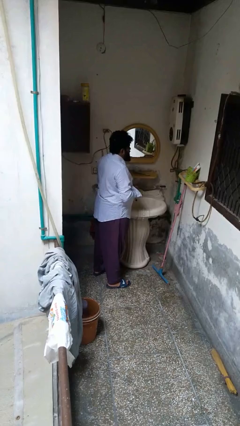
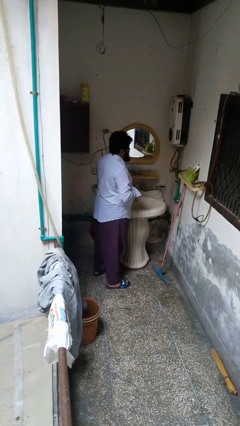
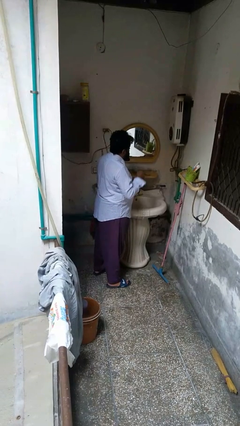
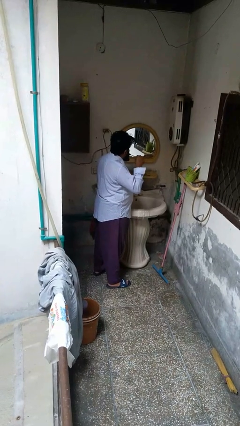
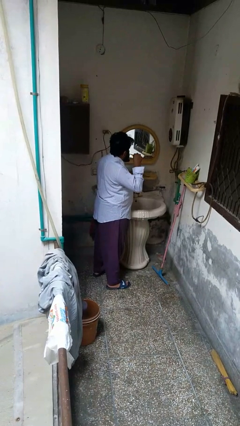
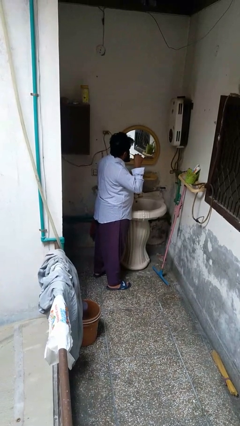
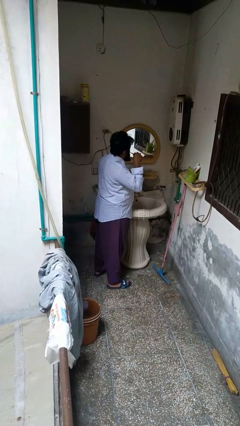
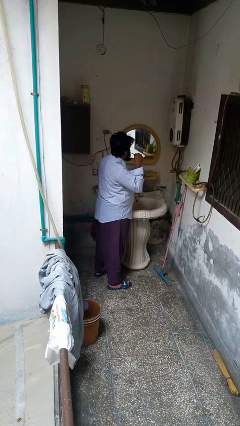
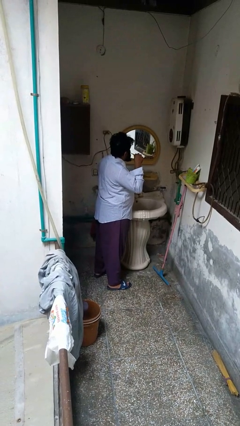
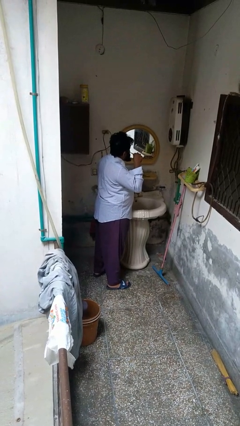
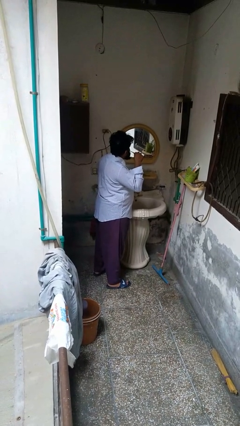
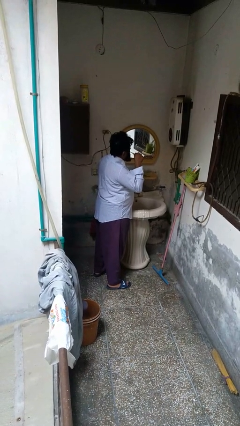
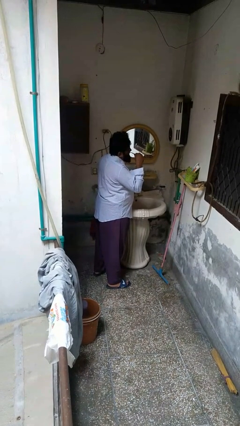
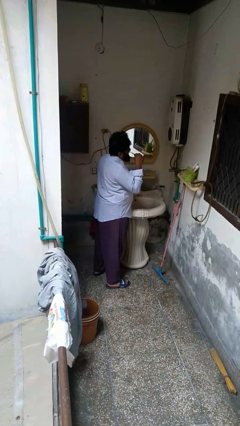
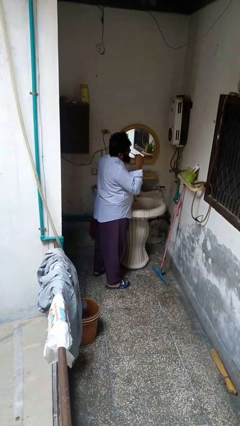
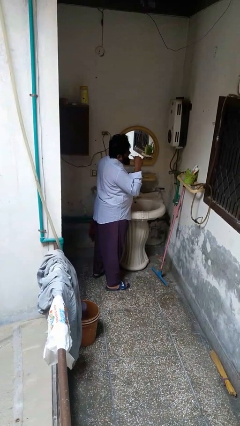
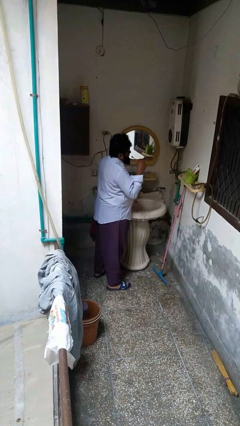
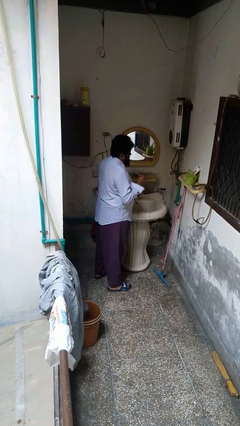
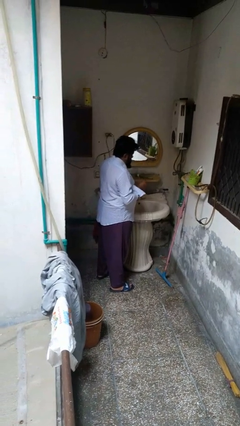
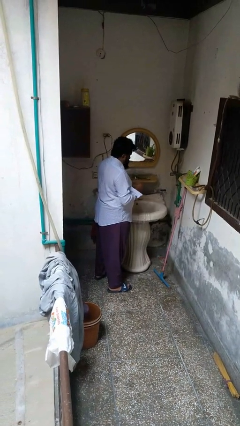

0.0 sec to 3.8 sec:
person brushes teeth

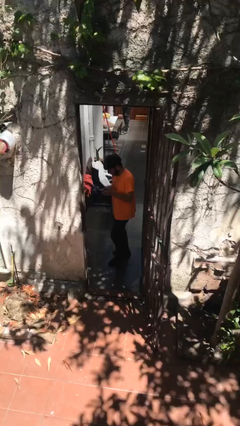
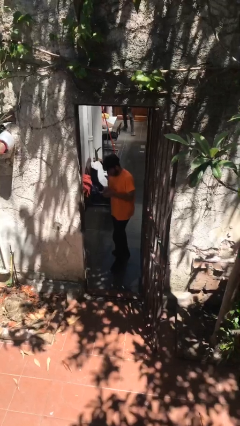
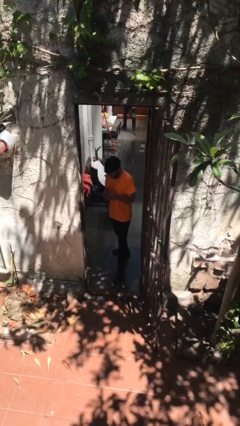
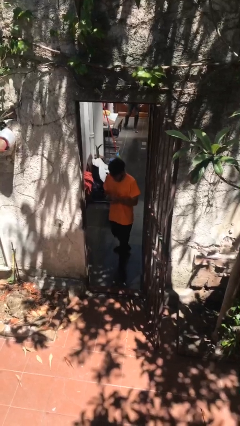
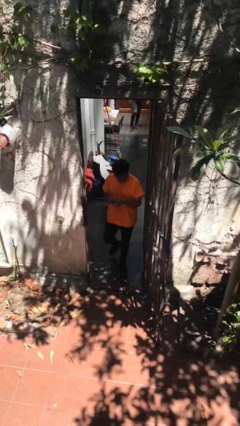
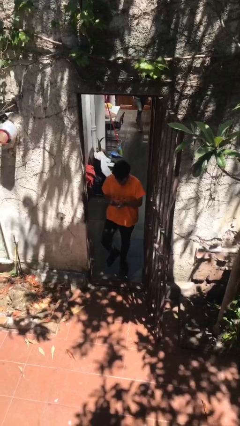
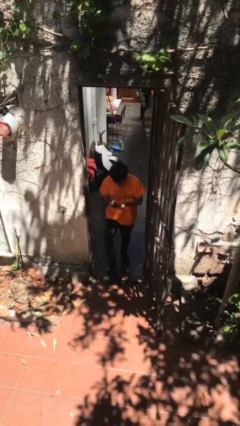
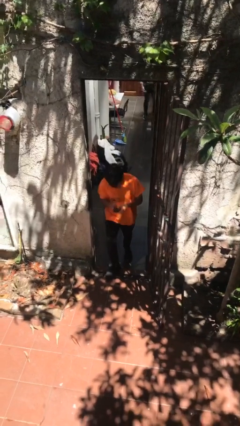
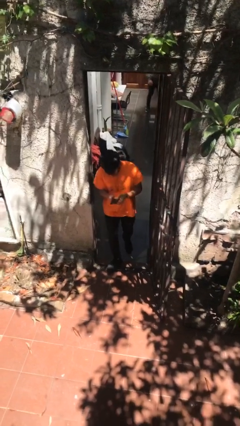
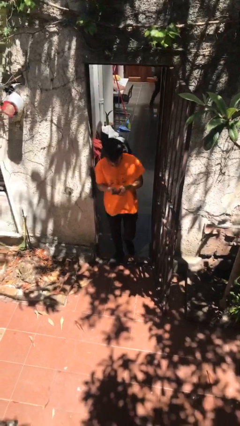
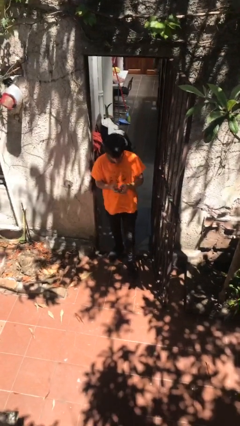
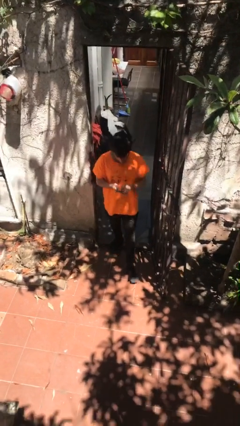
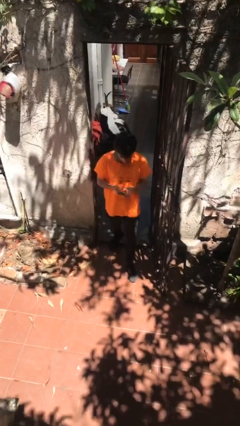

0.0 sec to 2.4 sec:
person enters scene through structure

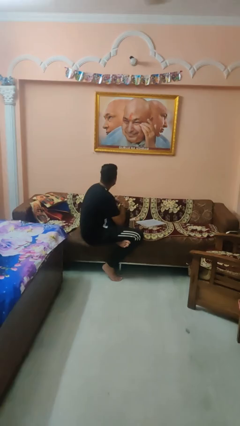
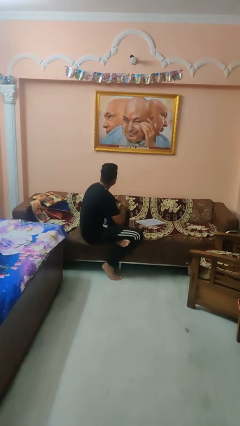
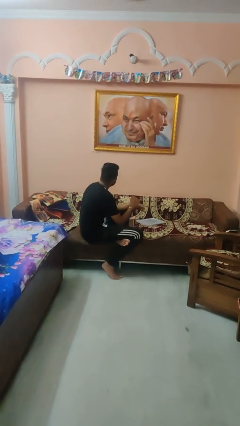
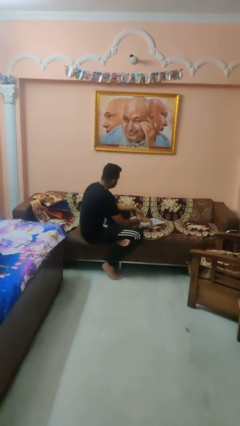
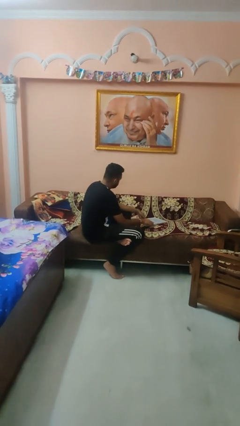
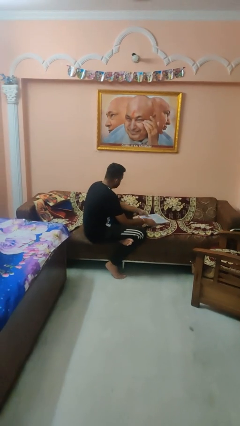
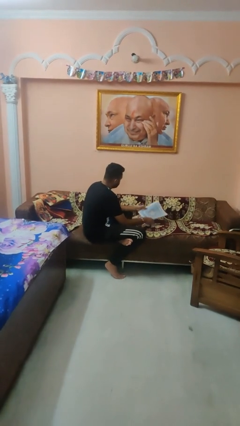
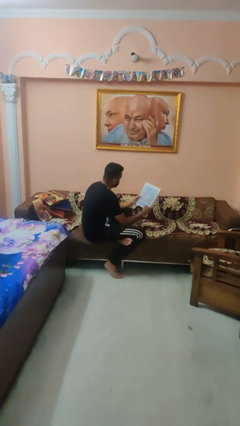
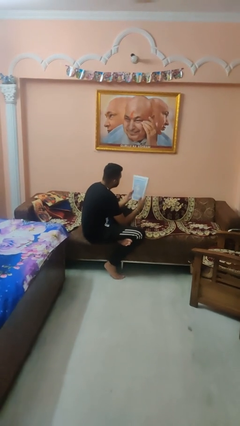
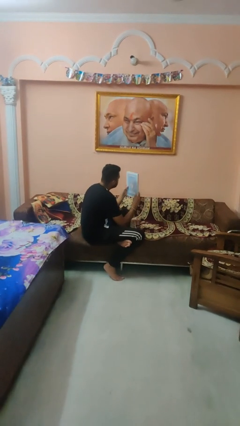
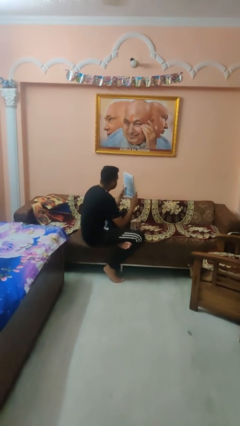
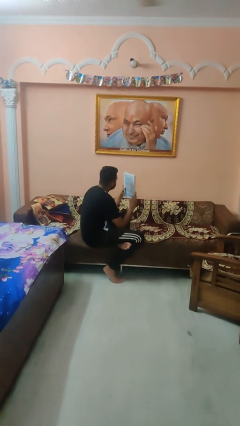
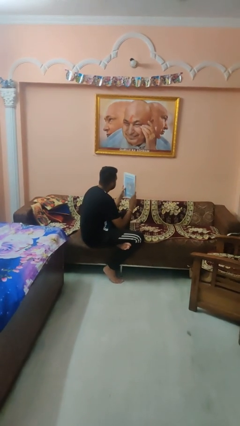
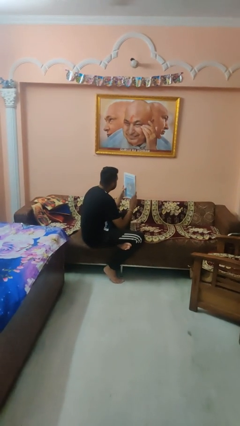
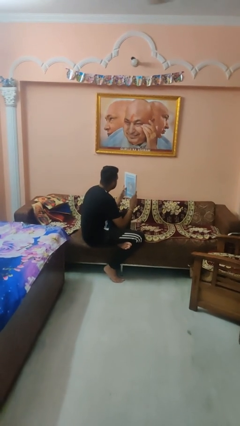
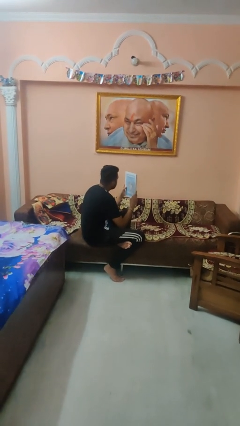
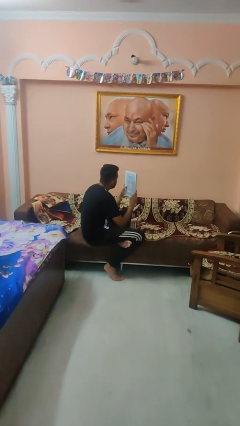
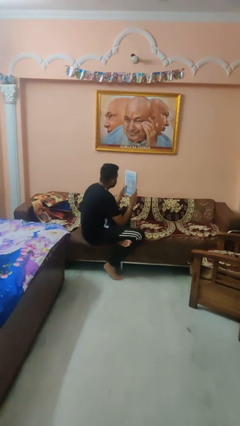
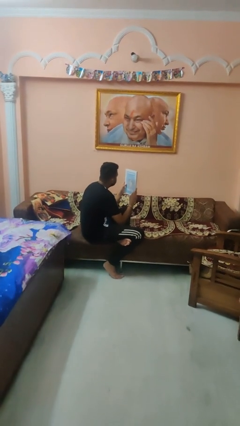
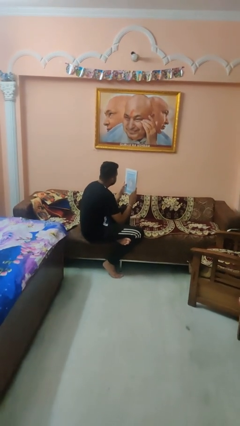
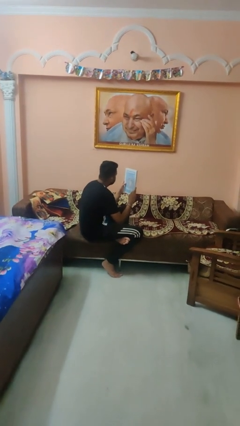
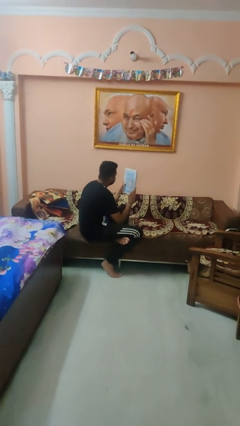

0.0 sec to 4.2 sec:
person picks up object from couch

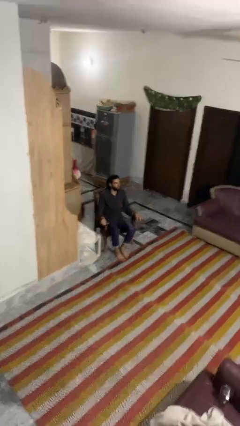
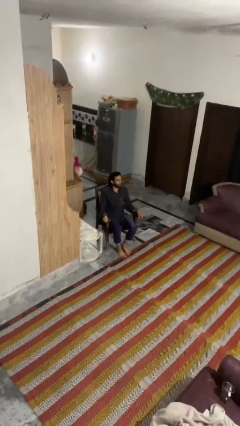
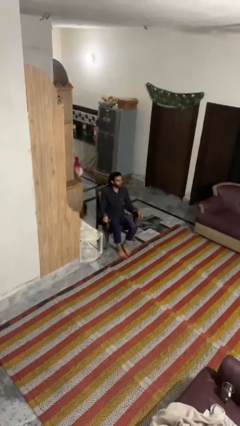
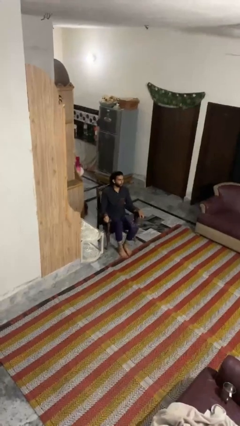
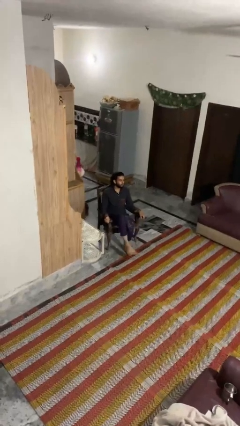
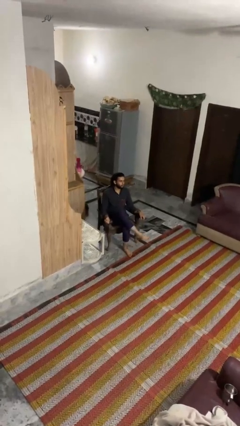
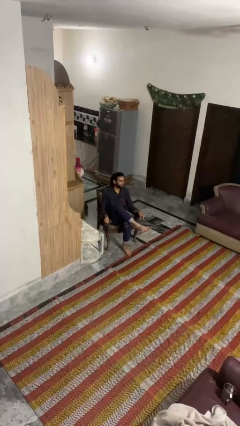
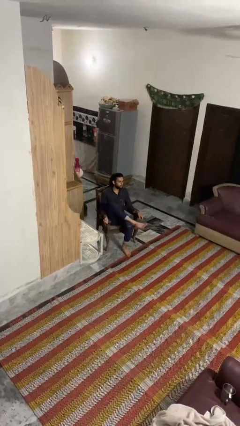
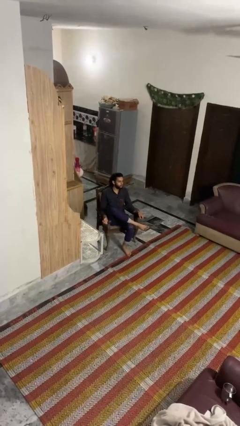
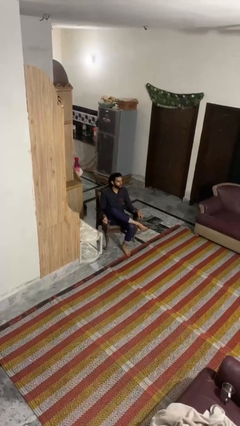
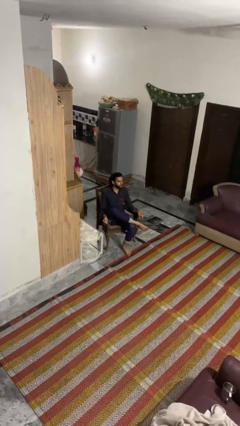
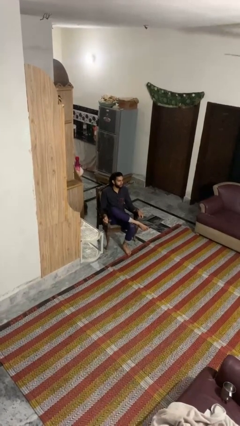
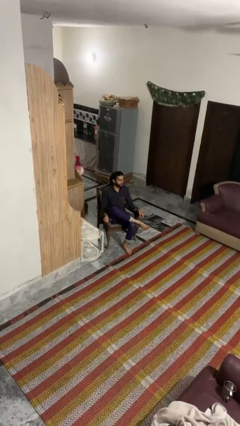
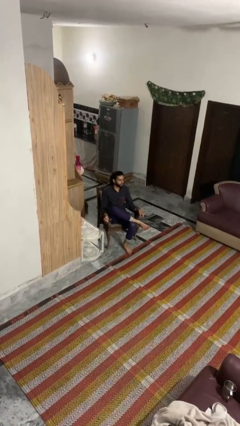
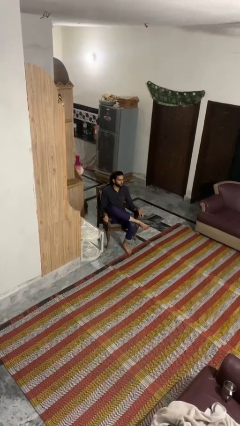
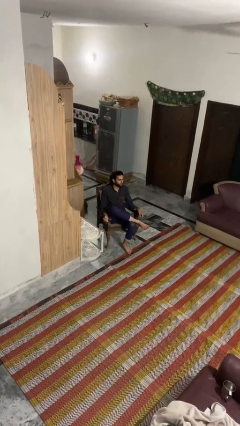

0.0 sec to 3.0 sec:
person crosses legs

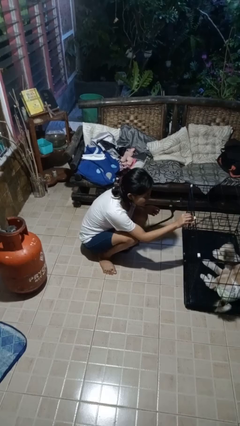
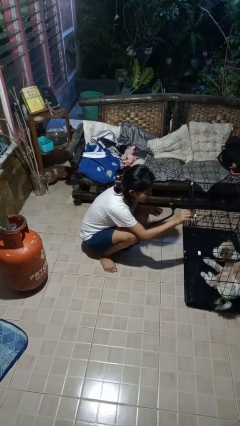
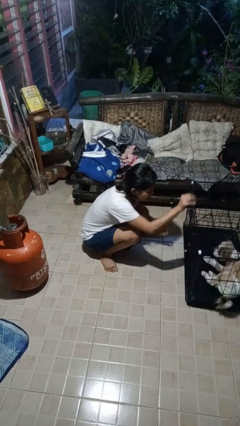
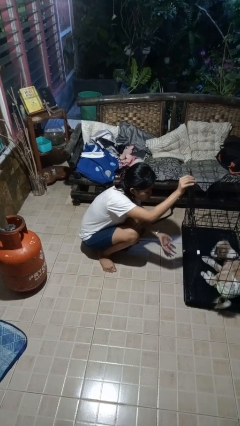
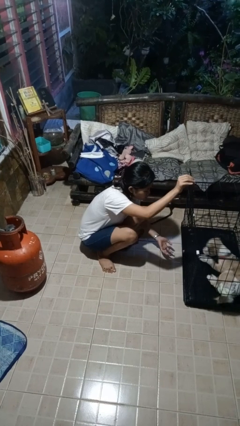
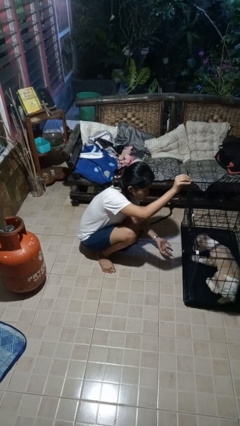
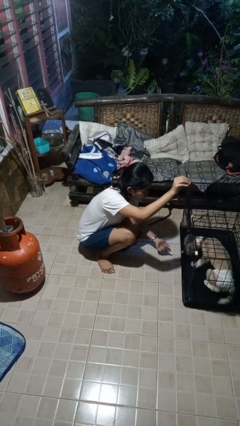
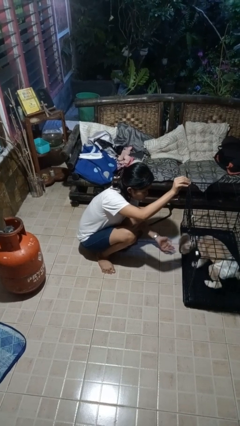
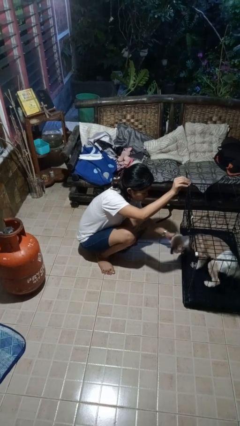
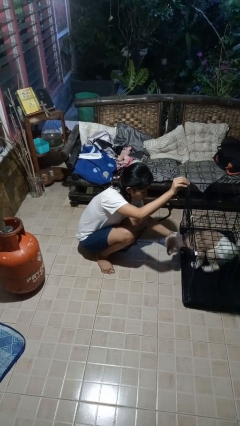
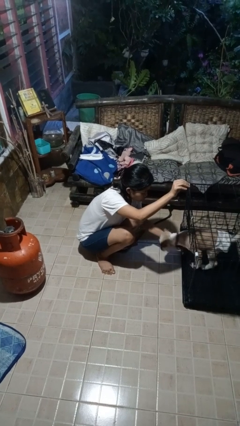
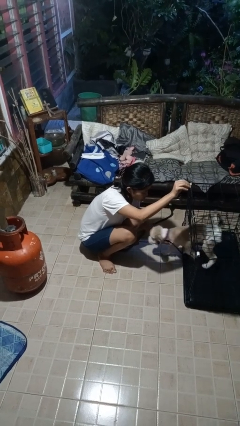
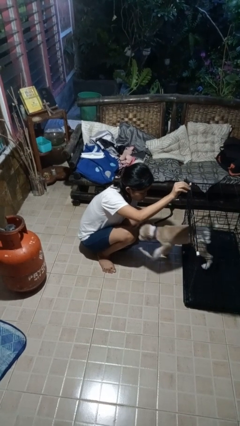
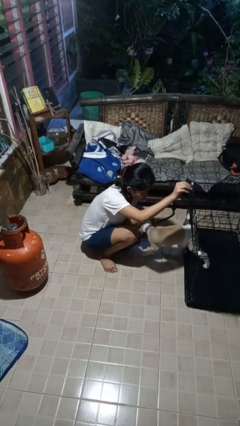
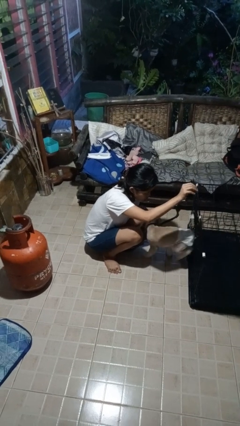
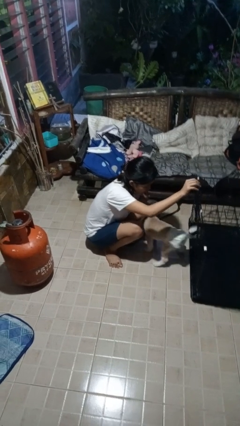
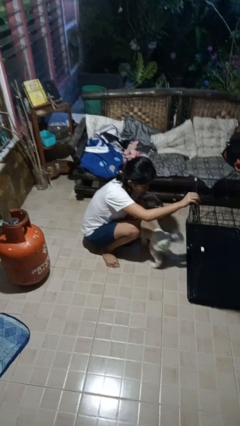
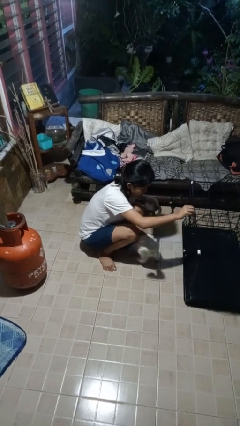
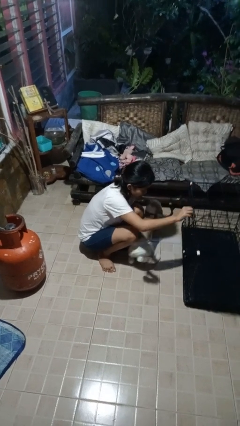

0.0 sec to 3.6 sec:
person uncrates dog

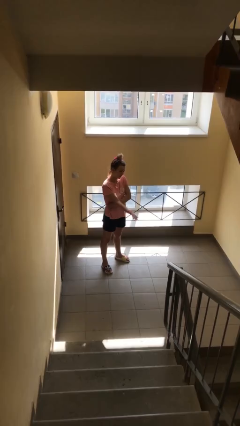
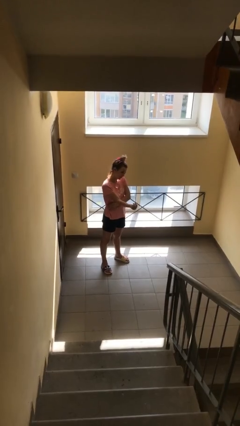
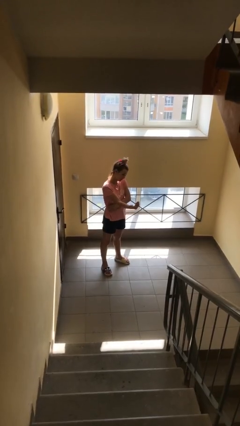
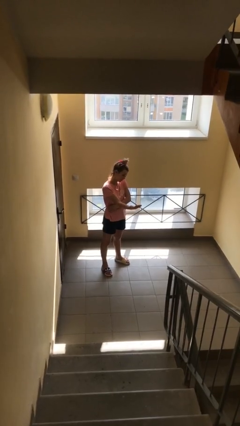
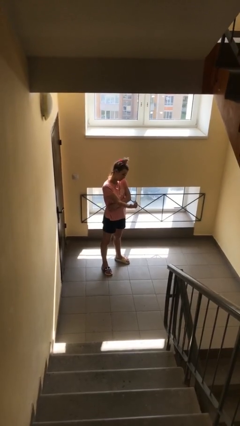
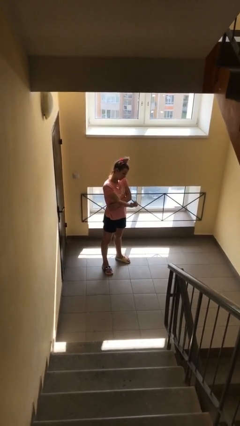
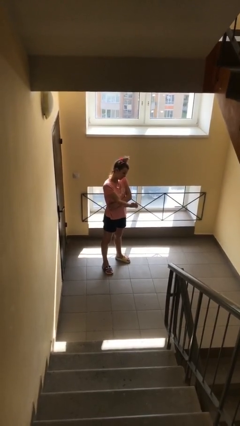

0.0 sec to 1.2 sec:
person gestures come here
